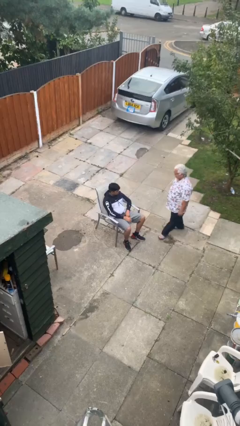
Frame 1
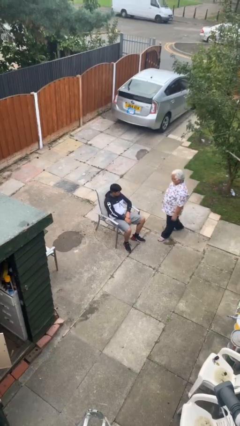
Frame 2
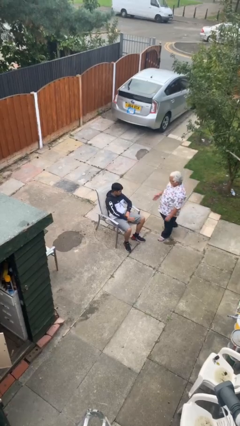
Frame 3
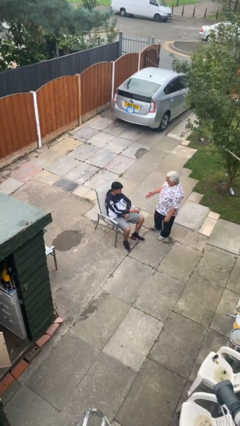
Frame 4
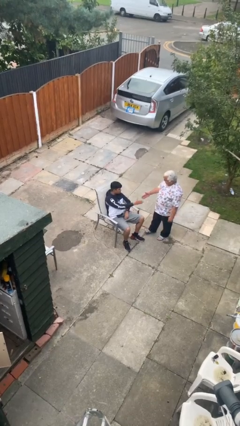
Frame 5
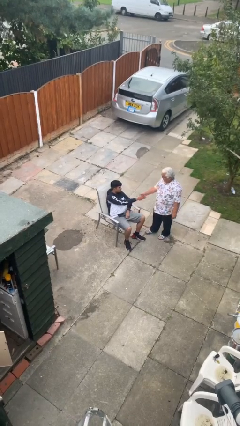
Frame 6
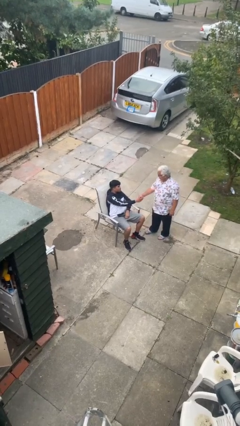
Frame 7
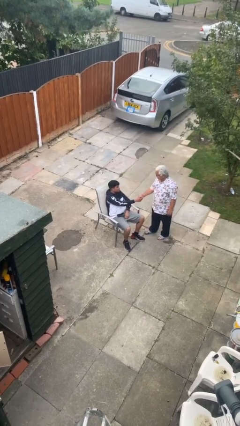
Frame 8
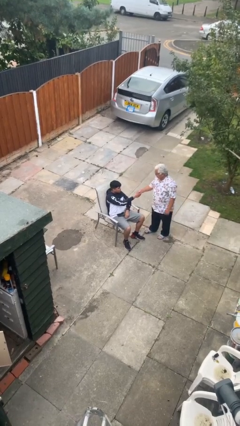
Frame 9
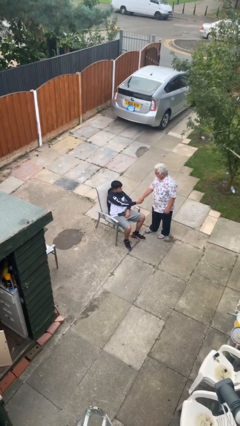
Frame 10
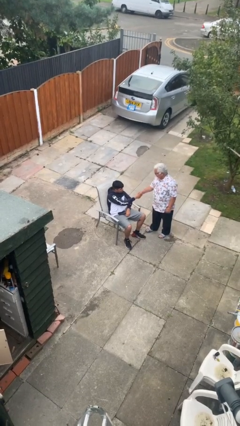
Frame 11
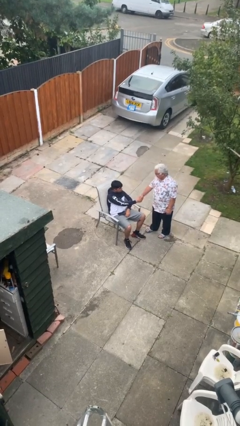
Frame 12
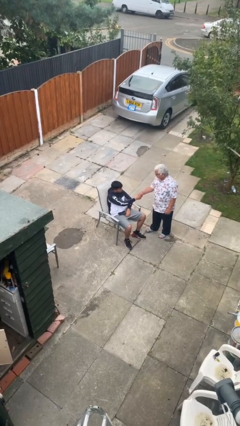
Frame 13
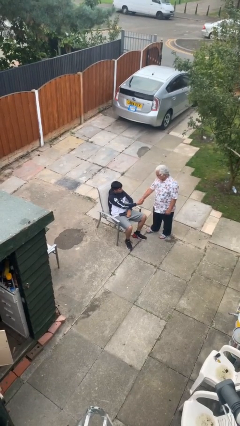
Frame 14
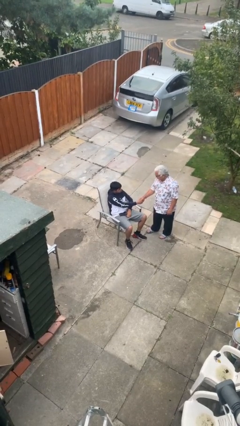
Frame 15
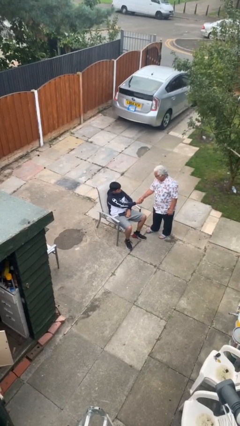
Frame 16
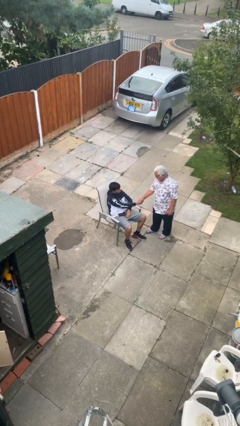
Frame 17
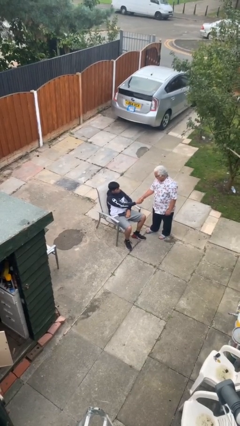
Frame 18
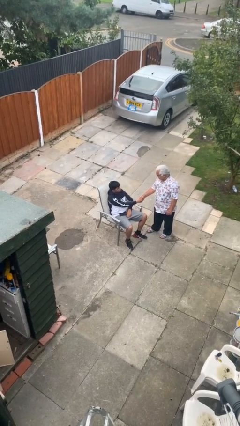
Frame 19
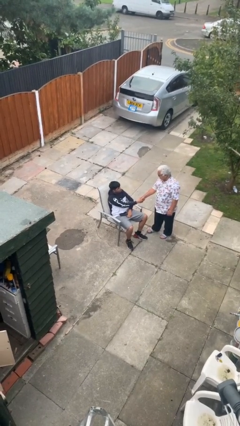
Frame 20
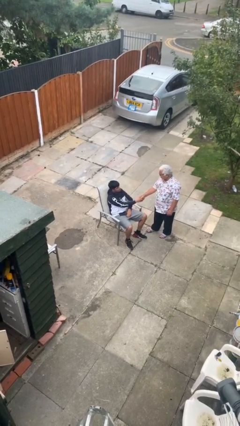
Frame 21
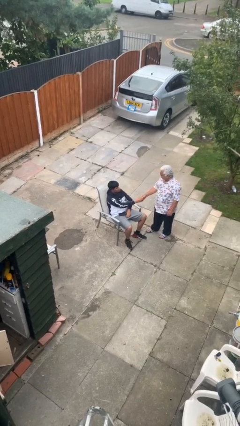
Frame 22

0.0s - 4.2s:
person shakes hand

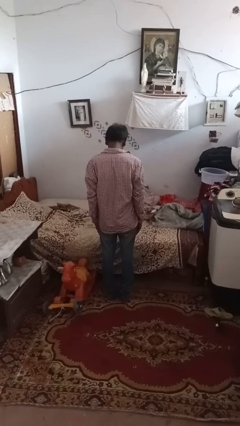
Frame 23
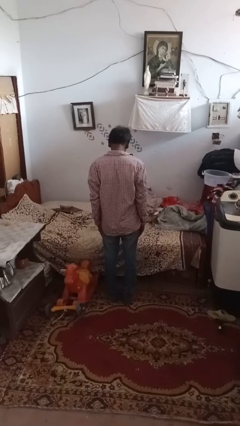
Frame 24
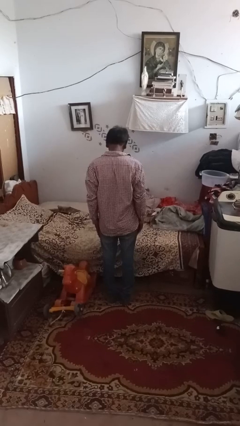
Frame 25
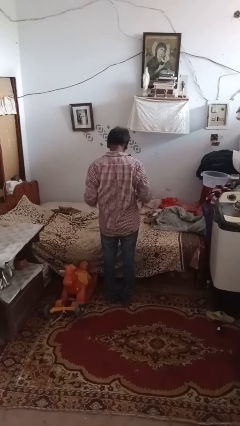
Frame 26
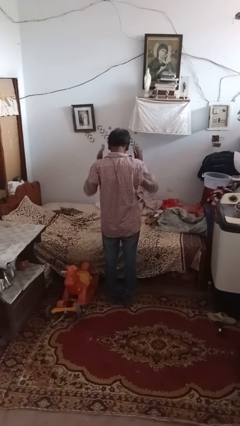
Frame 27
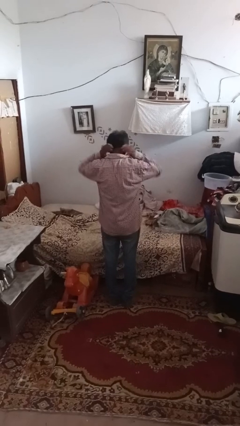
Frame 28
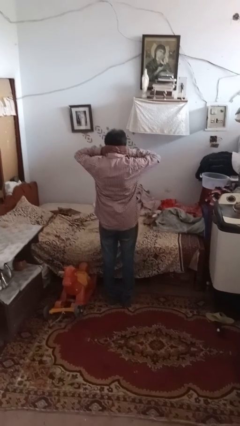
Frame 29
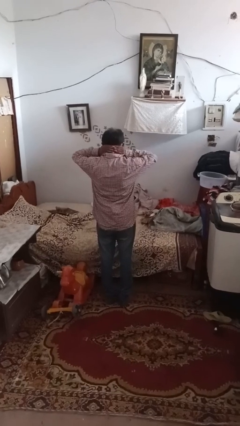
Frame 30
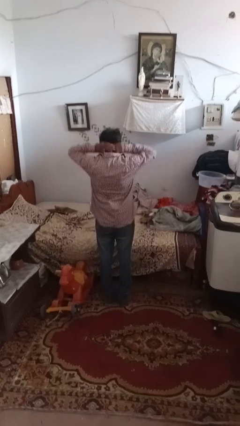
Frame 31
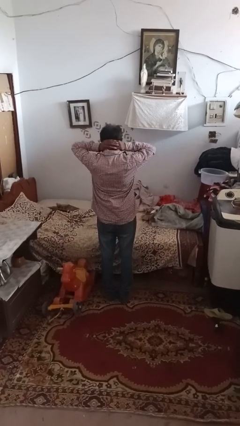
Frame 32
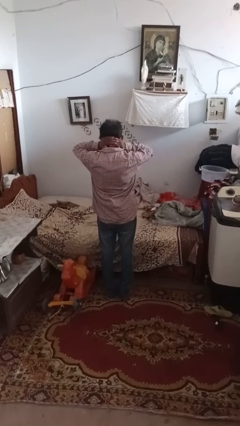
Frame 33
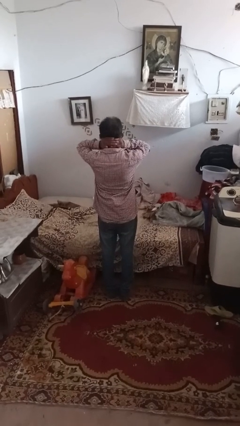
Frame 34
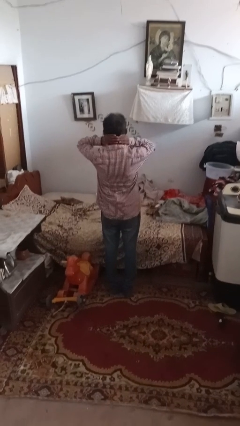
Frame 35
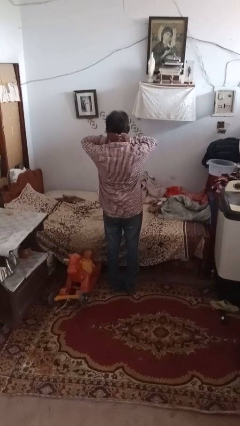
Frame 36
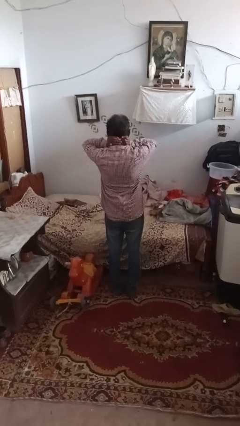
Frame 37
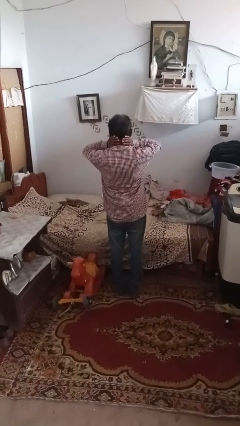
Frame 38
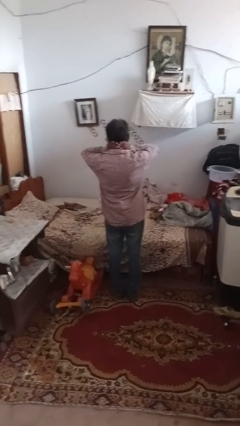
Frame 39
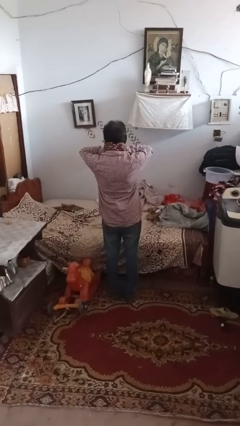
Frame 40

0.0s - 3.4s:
person rubs neck

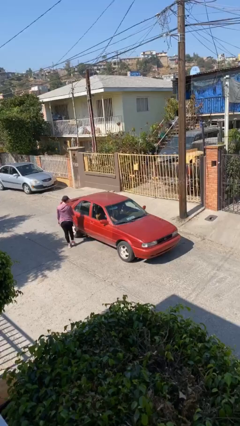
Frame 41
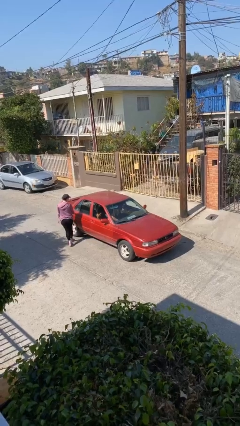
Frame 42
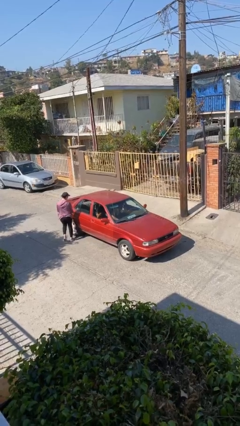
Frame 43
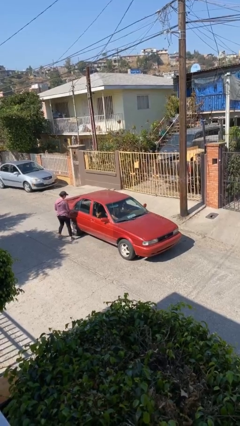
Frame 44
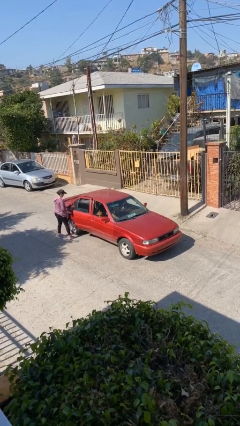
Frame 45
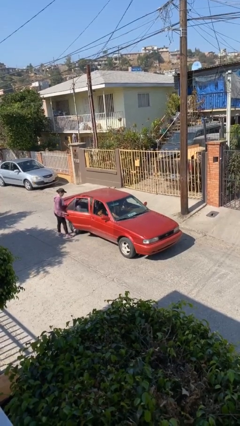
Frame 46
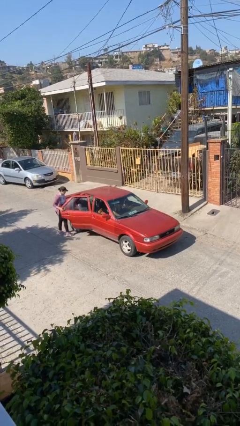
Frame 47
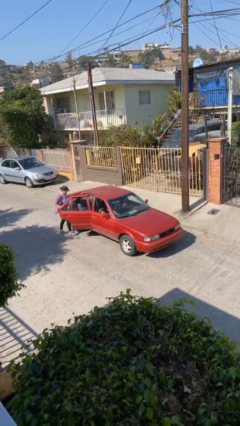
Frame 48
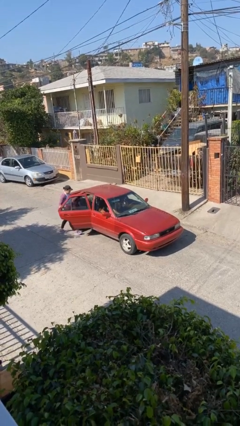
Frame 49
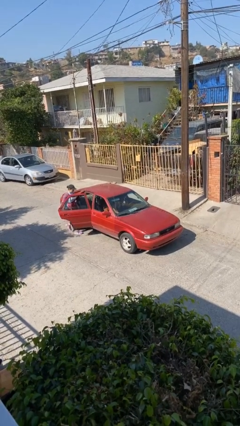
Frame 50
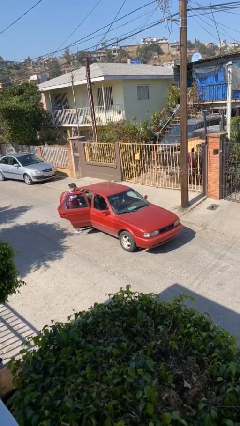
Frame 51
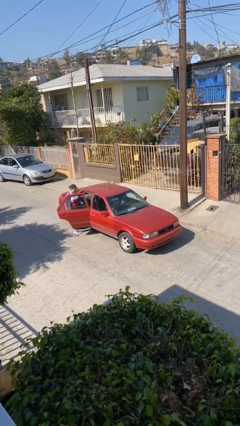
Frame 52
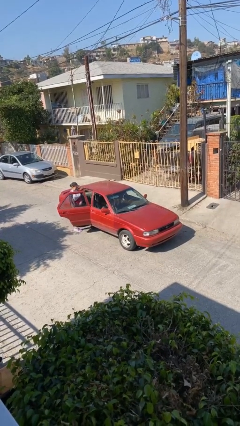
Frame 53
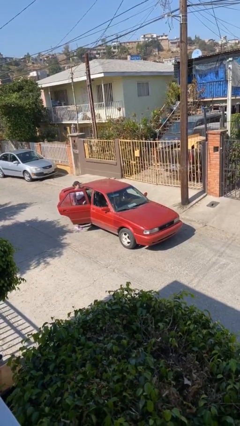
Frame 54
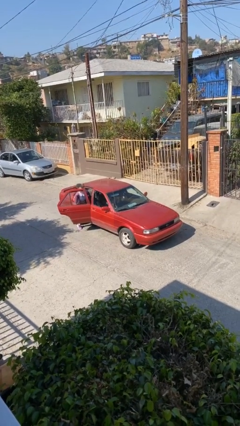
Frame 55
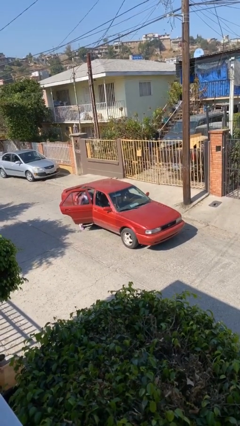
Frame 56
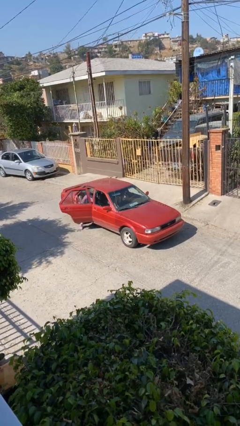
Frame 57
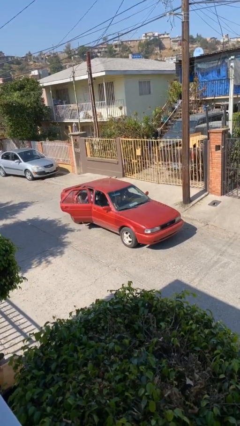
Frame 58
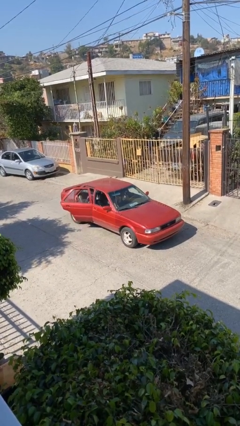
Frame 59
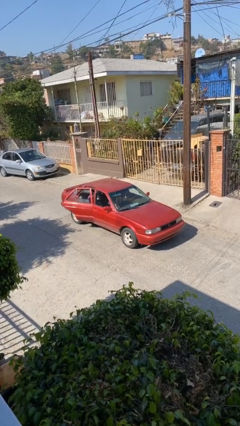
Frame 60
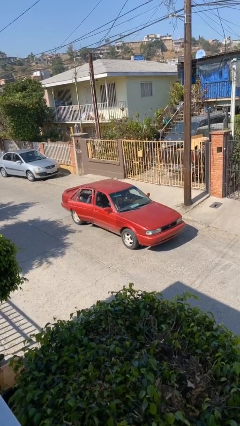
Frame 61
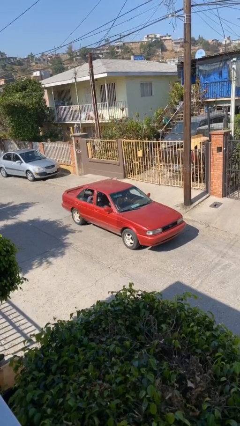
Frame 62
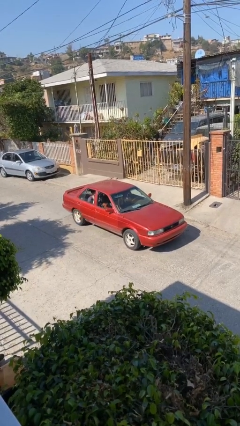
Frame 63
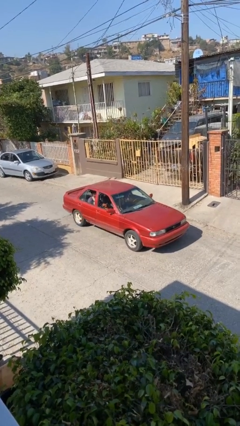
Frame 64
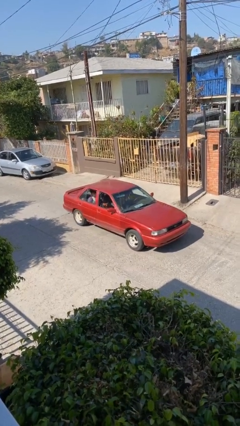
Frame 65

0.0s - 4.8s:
car picks up person

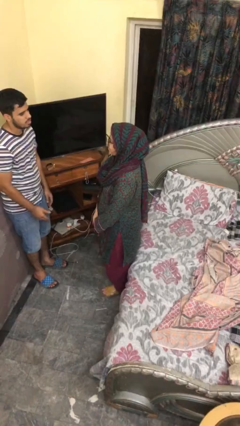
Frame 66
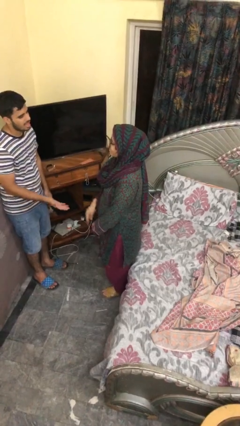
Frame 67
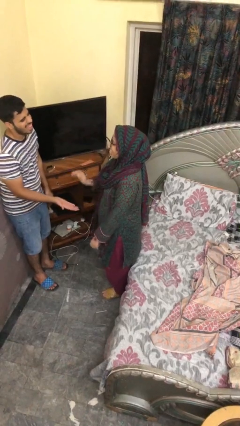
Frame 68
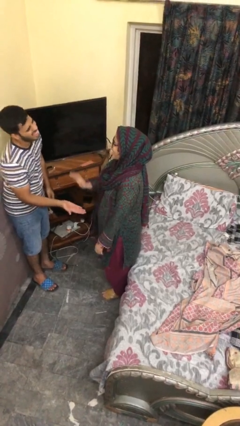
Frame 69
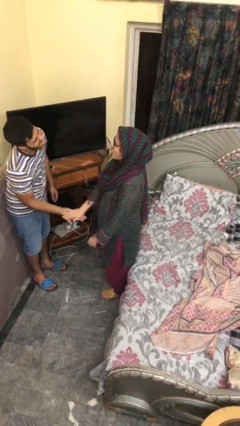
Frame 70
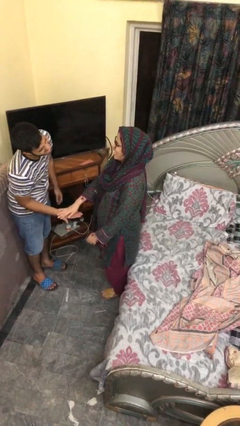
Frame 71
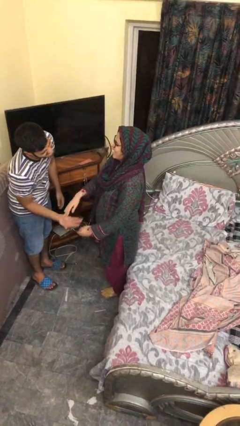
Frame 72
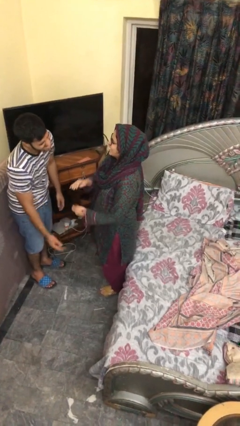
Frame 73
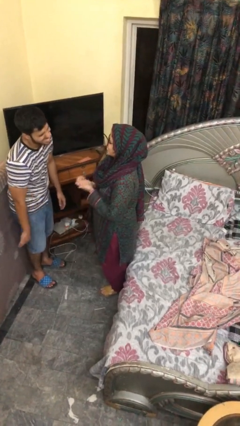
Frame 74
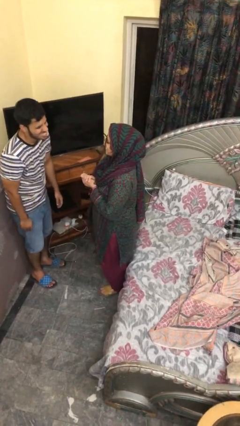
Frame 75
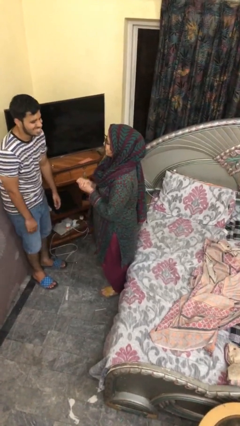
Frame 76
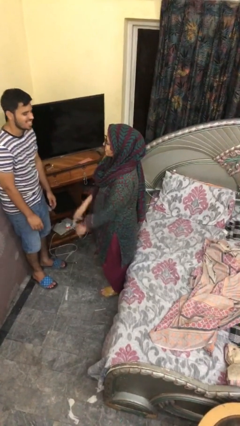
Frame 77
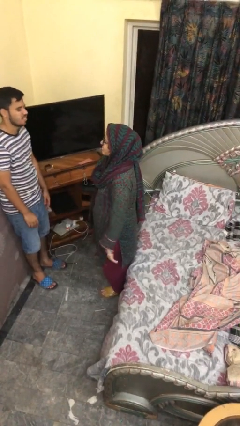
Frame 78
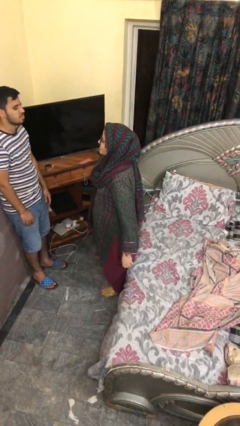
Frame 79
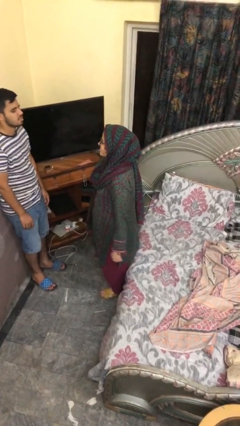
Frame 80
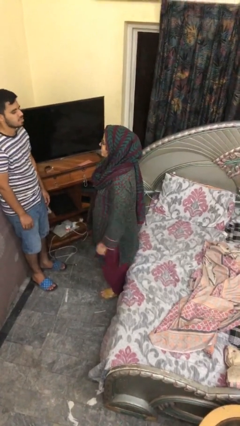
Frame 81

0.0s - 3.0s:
person laughs with person

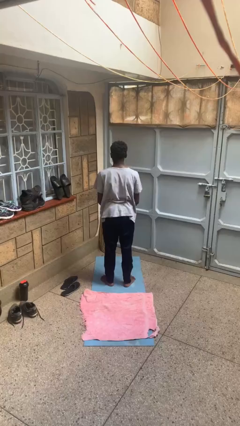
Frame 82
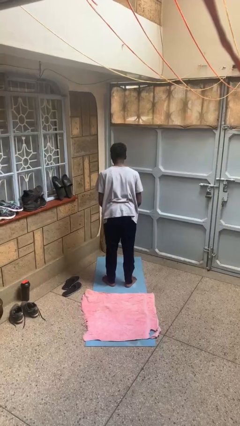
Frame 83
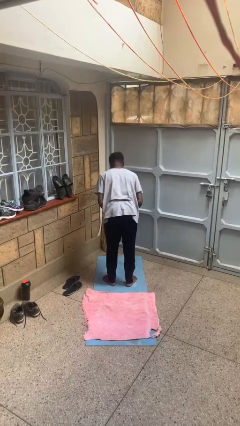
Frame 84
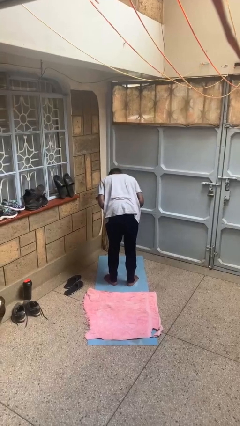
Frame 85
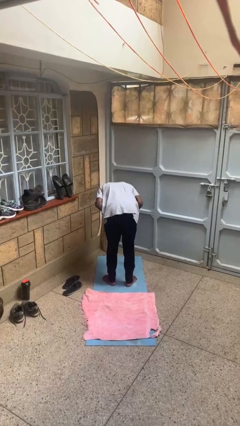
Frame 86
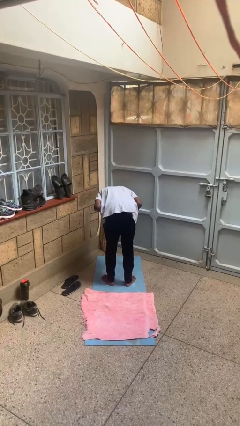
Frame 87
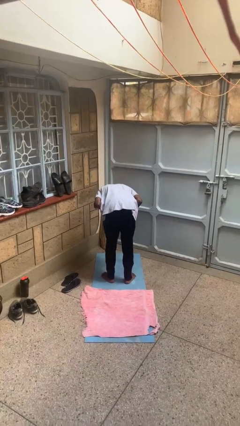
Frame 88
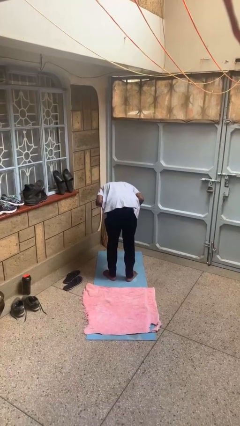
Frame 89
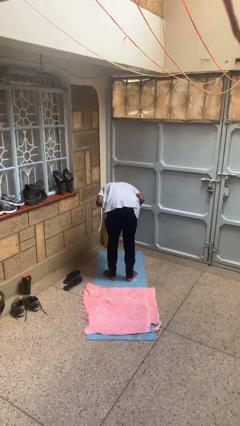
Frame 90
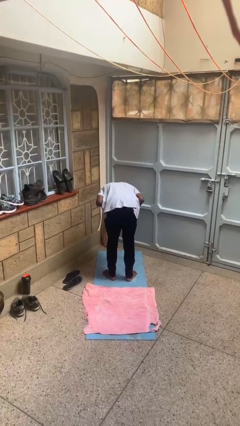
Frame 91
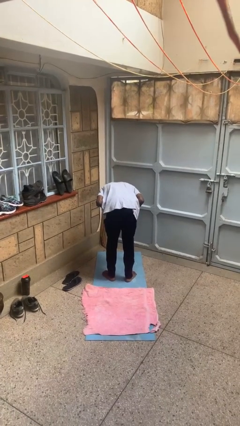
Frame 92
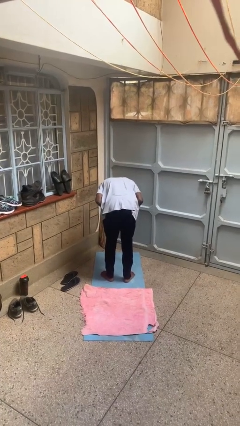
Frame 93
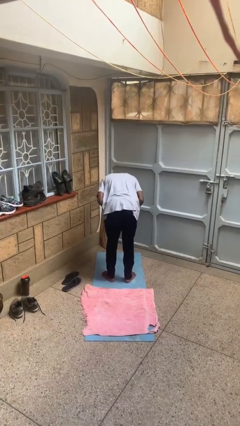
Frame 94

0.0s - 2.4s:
person bows
